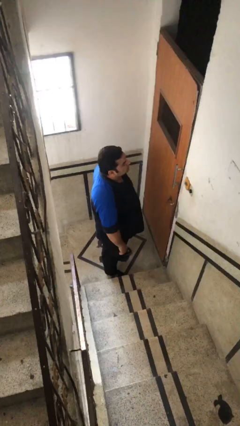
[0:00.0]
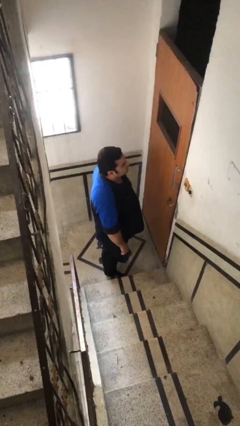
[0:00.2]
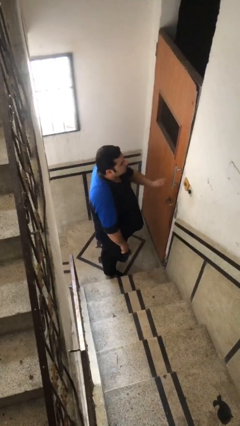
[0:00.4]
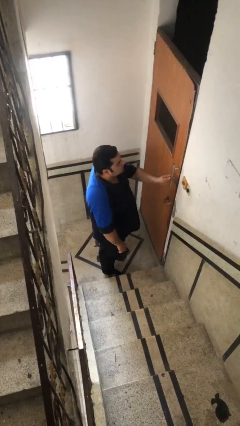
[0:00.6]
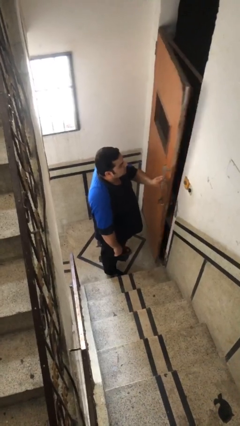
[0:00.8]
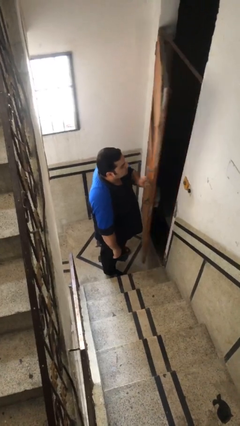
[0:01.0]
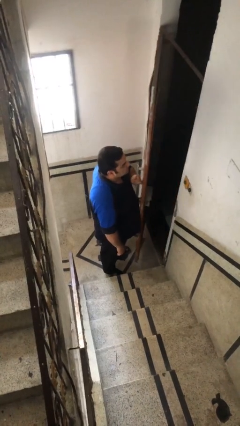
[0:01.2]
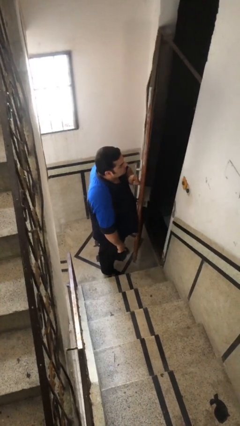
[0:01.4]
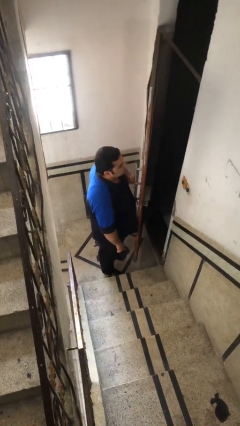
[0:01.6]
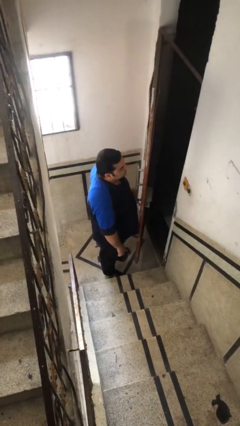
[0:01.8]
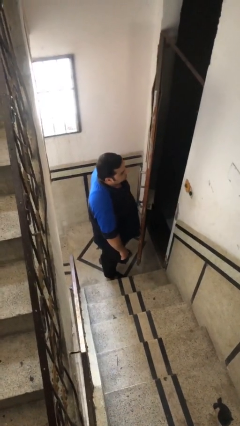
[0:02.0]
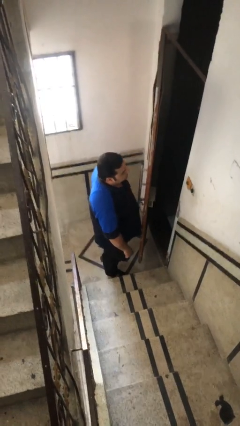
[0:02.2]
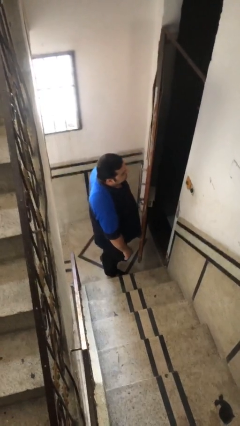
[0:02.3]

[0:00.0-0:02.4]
person opens facility door

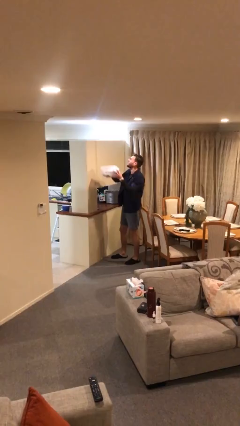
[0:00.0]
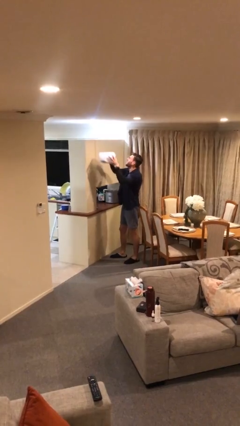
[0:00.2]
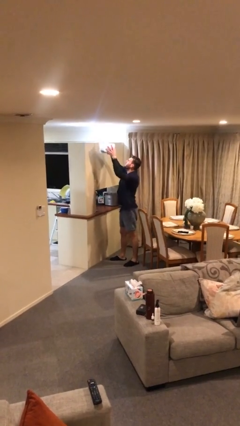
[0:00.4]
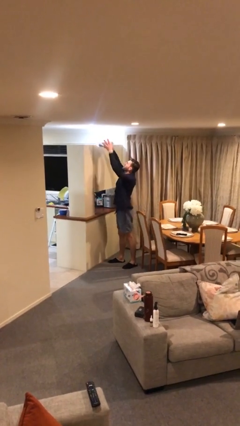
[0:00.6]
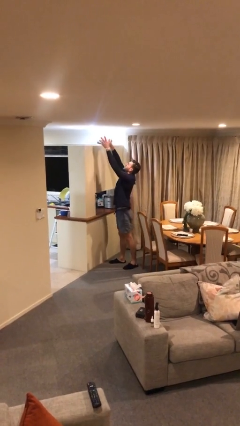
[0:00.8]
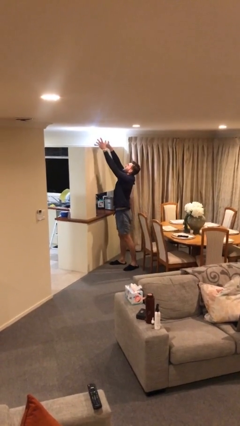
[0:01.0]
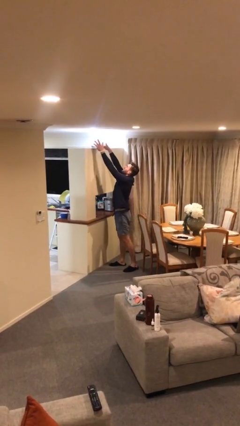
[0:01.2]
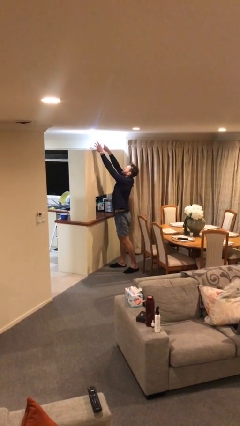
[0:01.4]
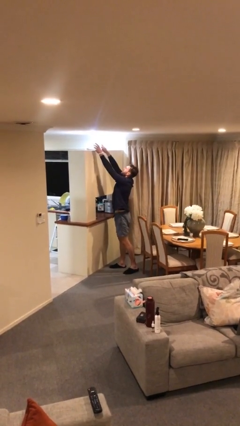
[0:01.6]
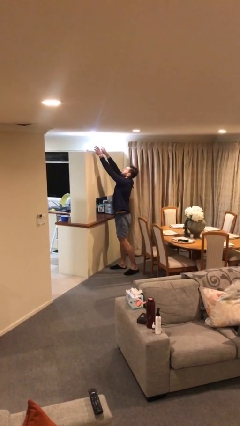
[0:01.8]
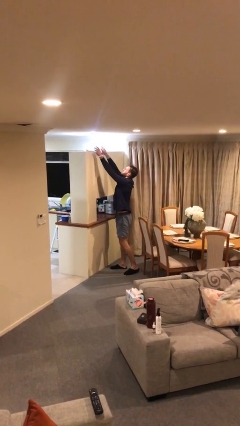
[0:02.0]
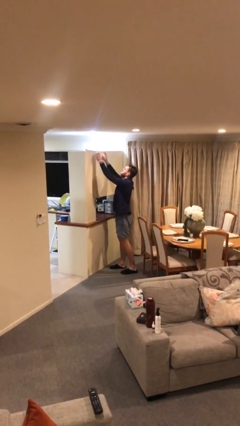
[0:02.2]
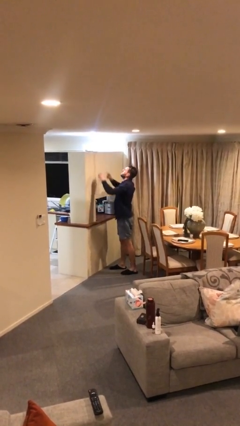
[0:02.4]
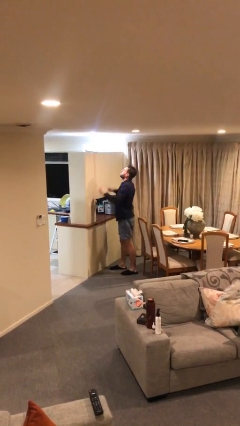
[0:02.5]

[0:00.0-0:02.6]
person puts down object on shelf

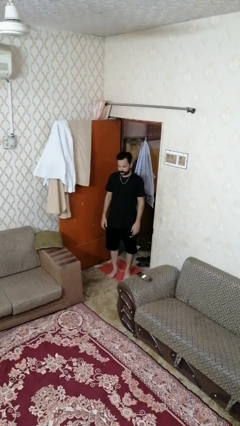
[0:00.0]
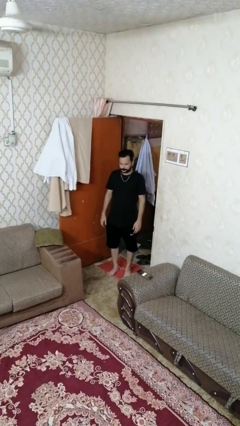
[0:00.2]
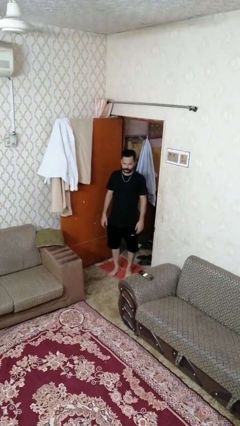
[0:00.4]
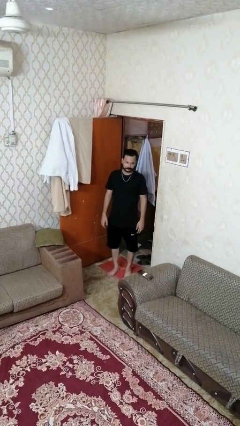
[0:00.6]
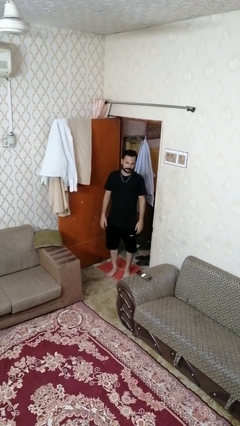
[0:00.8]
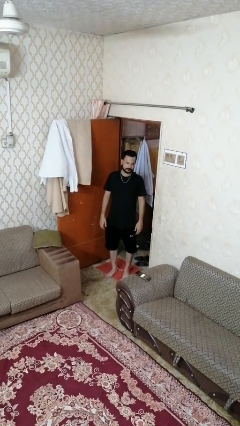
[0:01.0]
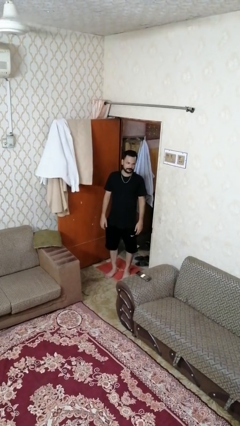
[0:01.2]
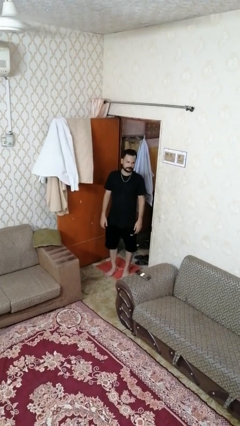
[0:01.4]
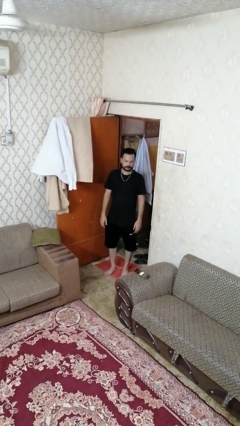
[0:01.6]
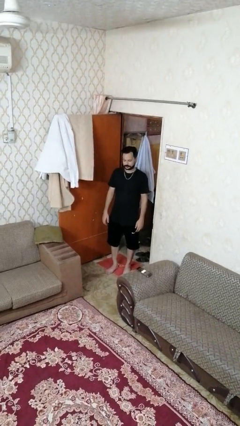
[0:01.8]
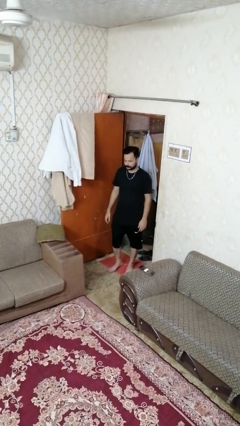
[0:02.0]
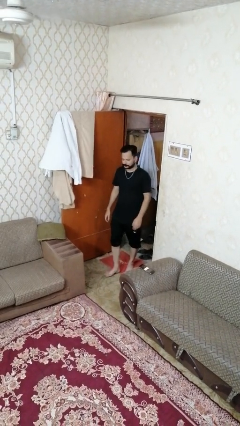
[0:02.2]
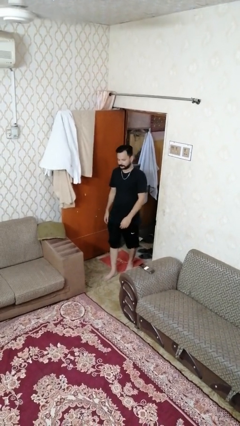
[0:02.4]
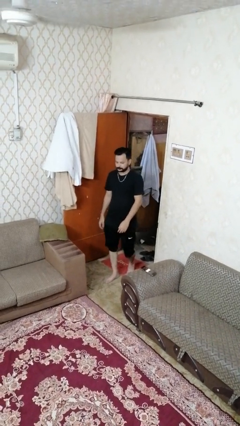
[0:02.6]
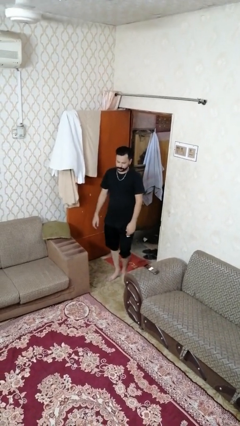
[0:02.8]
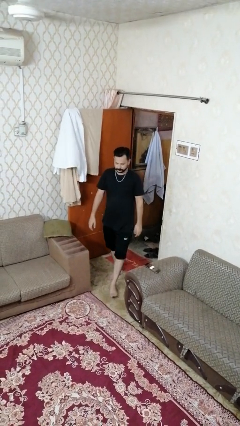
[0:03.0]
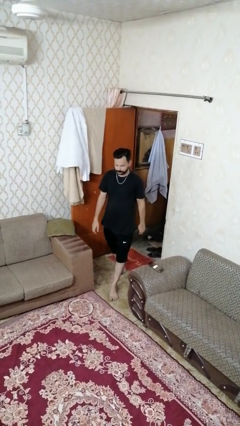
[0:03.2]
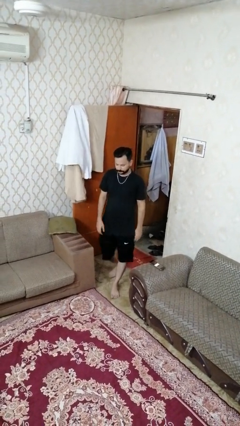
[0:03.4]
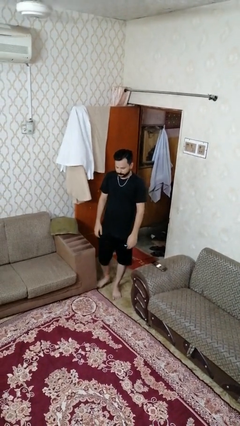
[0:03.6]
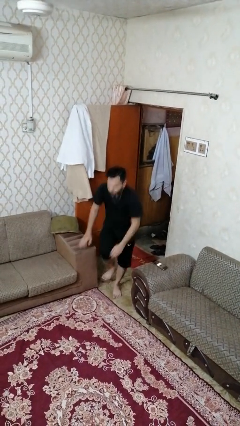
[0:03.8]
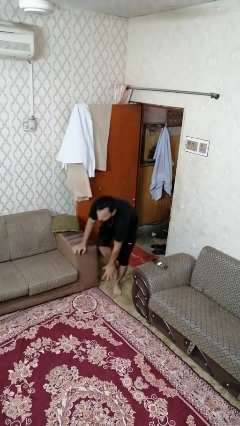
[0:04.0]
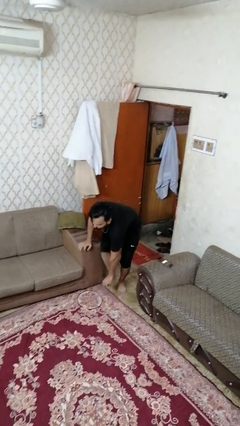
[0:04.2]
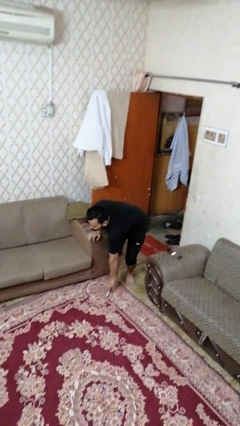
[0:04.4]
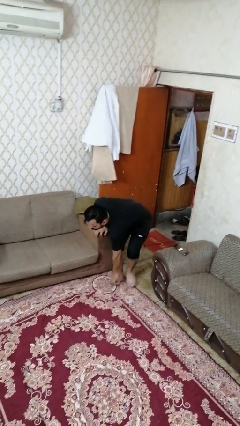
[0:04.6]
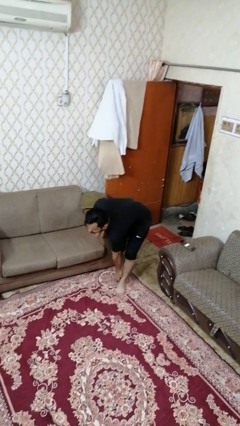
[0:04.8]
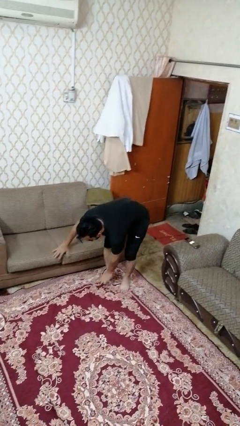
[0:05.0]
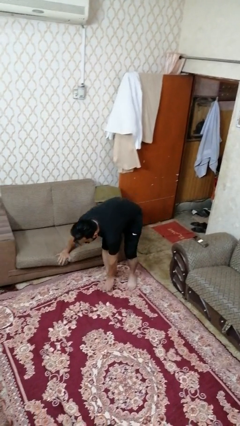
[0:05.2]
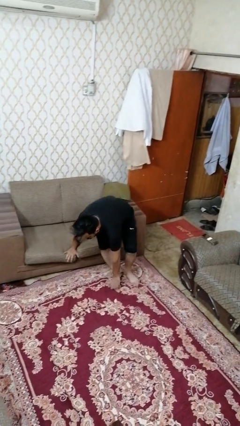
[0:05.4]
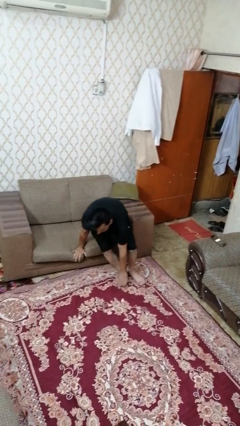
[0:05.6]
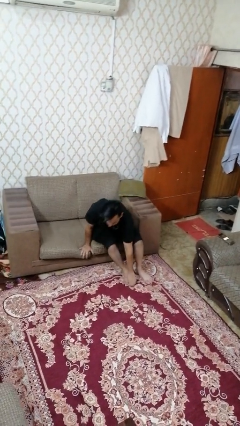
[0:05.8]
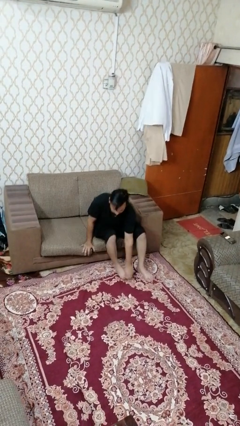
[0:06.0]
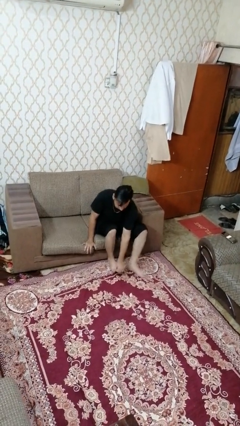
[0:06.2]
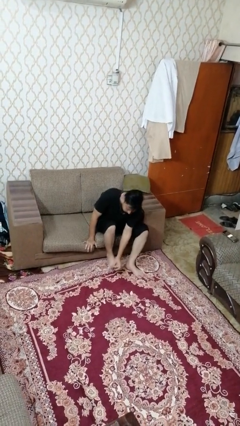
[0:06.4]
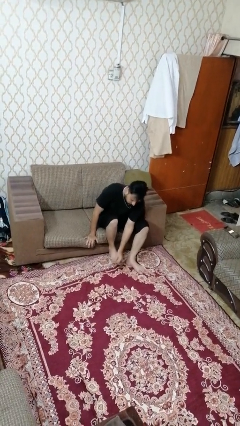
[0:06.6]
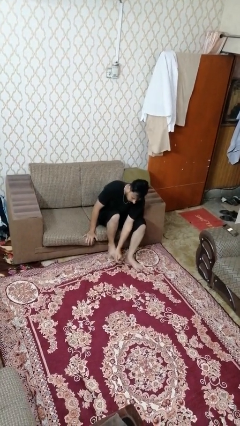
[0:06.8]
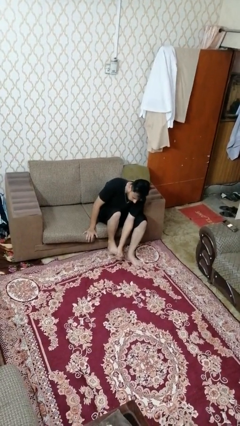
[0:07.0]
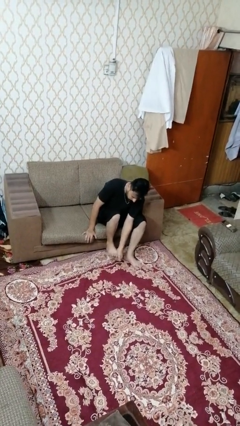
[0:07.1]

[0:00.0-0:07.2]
person stubs toe

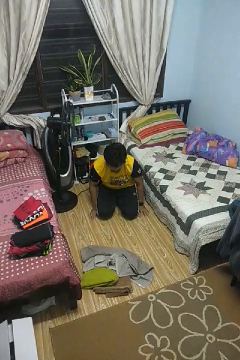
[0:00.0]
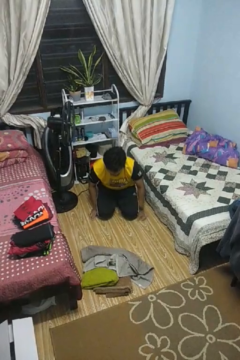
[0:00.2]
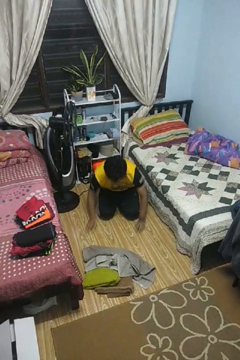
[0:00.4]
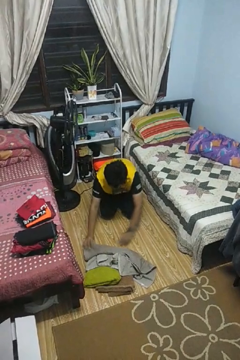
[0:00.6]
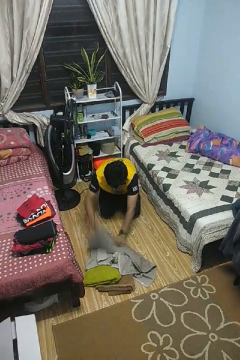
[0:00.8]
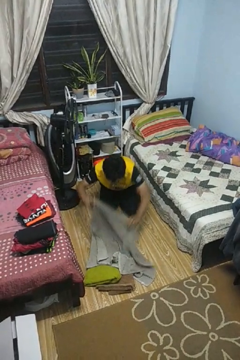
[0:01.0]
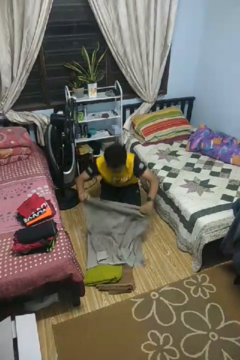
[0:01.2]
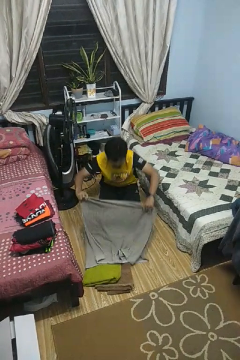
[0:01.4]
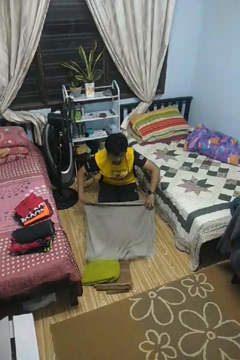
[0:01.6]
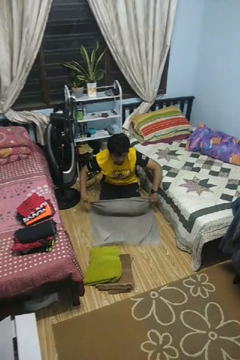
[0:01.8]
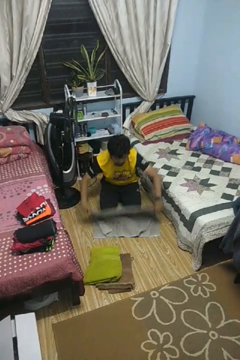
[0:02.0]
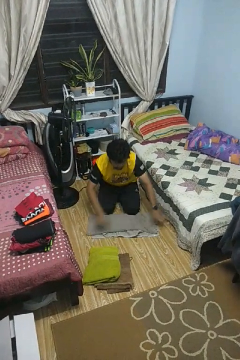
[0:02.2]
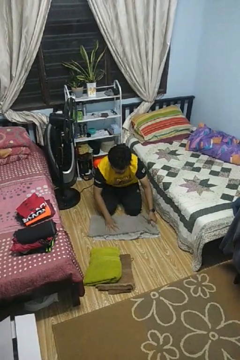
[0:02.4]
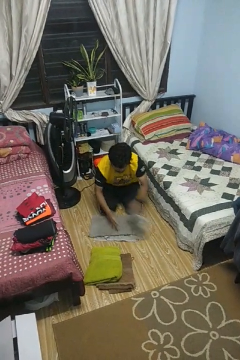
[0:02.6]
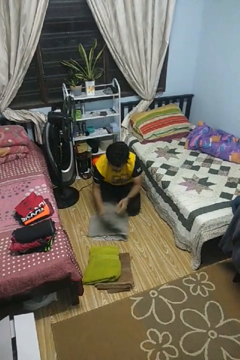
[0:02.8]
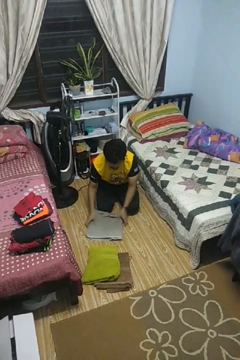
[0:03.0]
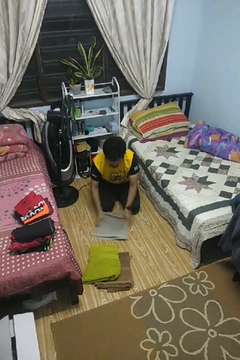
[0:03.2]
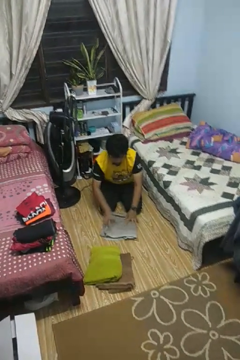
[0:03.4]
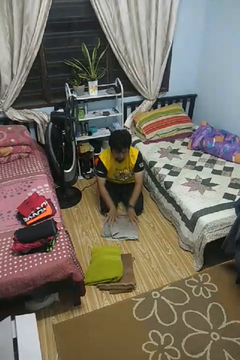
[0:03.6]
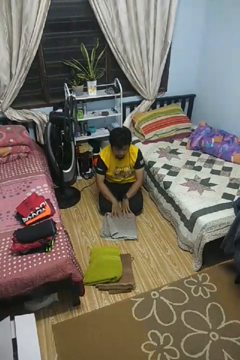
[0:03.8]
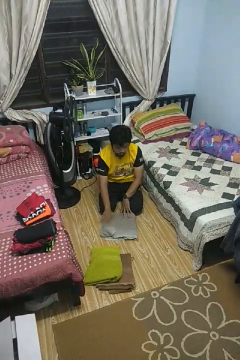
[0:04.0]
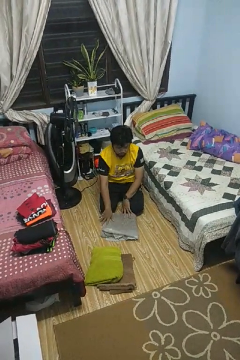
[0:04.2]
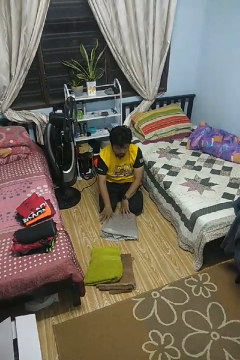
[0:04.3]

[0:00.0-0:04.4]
person folds towel

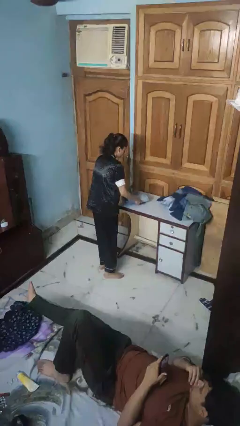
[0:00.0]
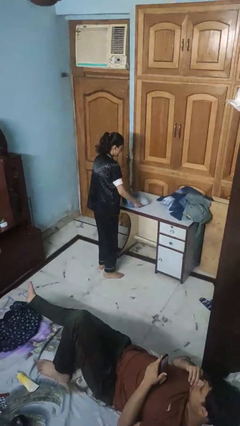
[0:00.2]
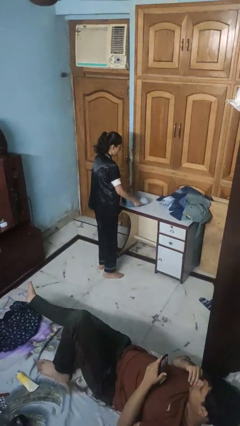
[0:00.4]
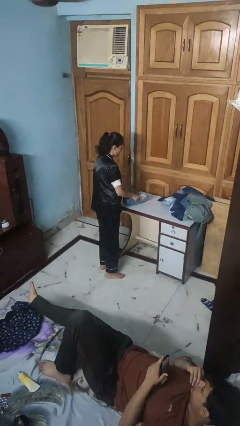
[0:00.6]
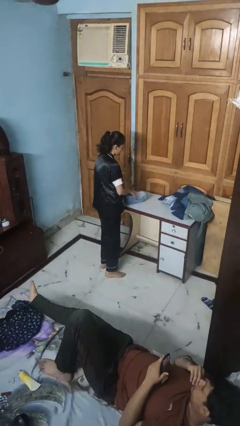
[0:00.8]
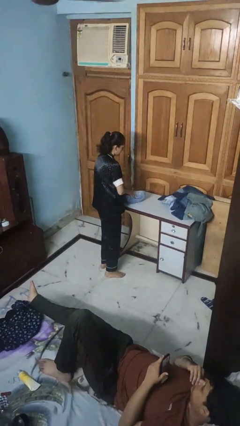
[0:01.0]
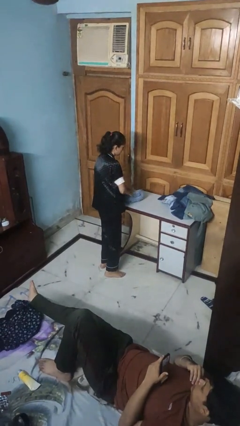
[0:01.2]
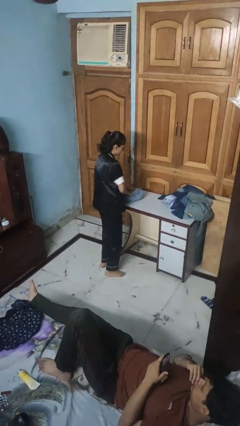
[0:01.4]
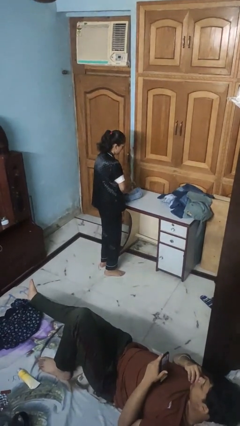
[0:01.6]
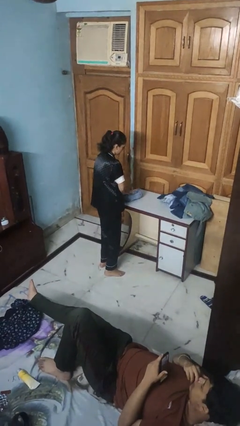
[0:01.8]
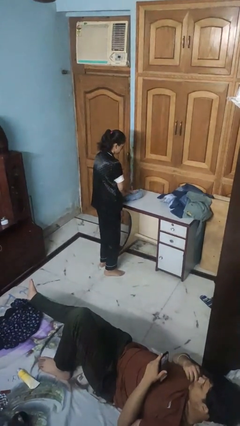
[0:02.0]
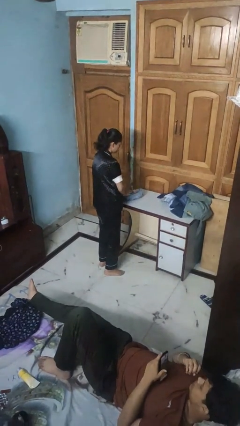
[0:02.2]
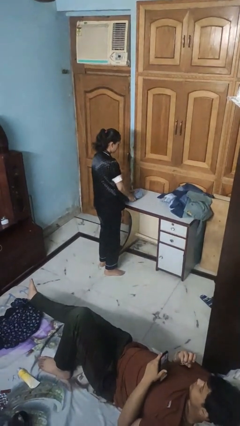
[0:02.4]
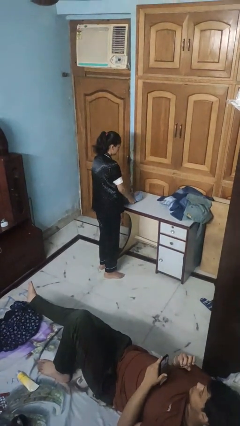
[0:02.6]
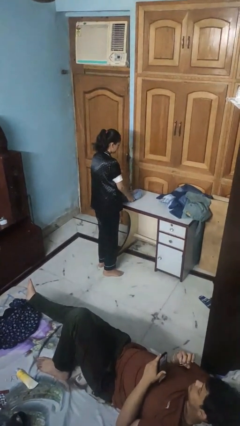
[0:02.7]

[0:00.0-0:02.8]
person folds pants
